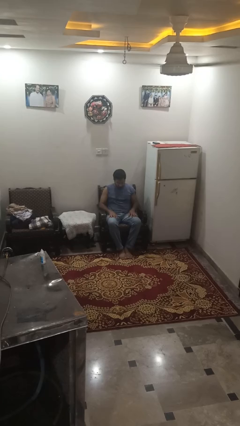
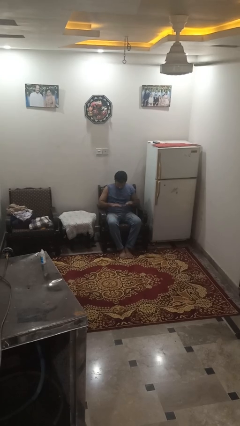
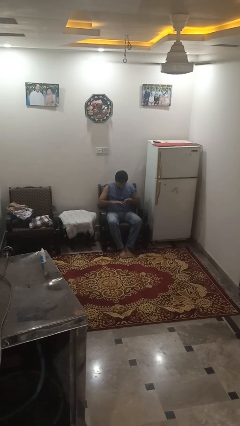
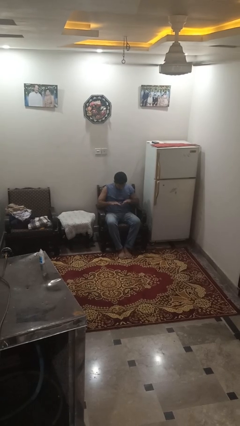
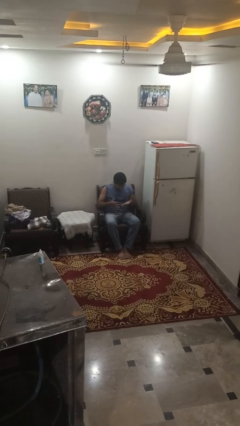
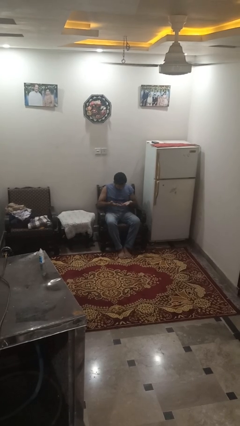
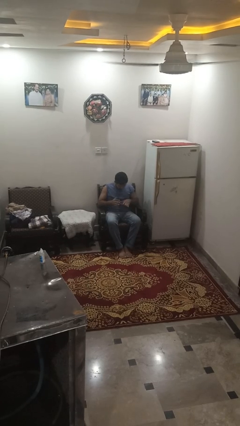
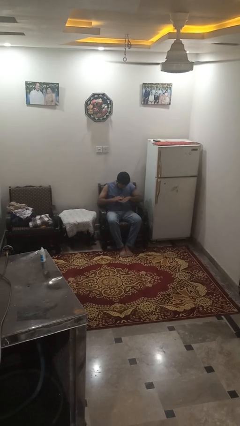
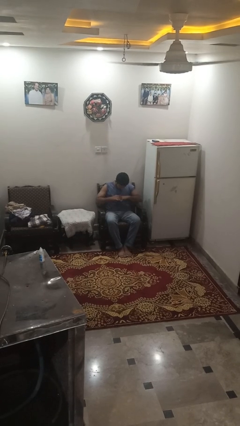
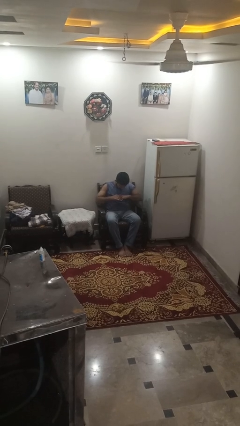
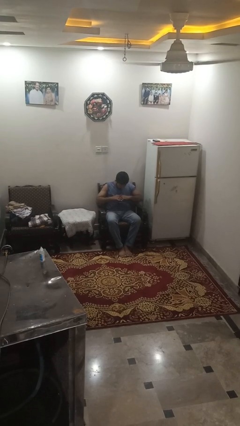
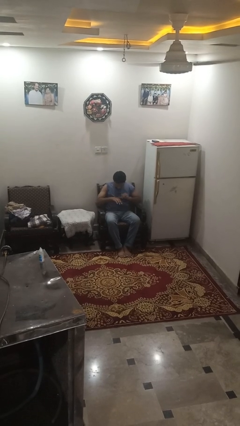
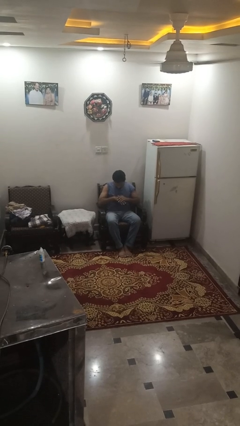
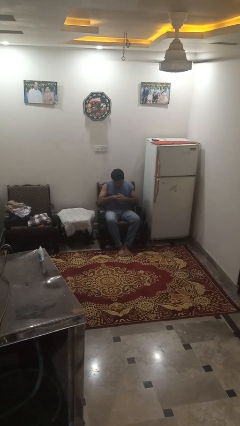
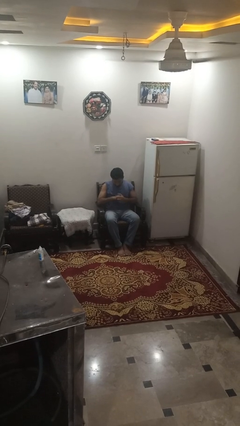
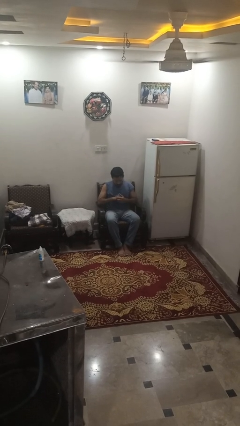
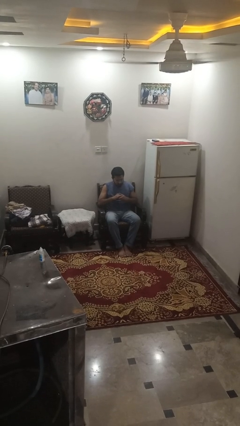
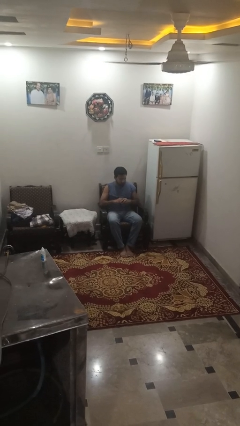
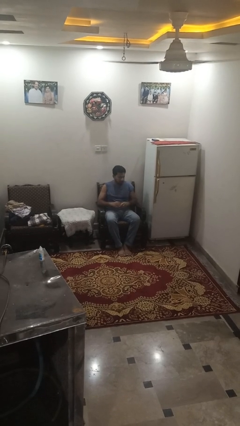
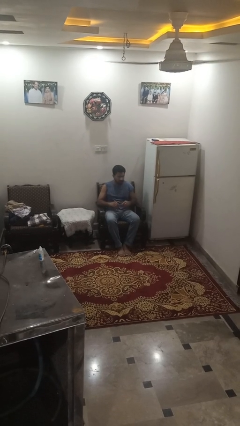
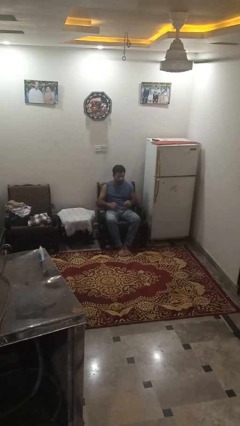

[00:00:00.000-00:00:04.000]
person looks at hands in lap

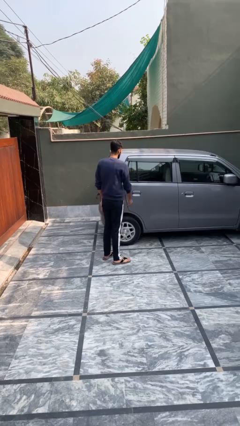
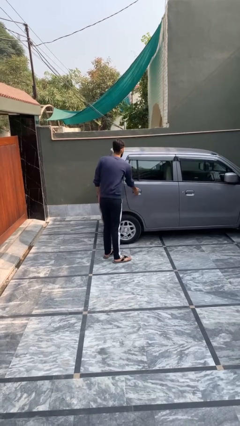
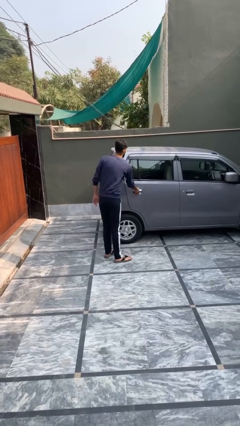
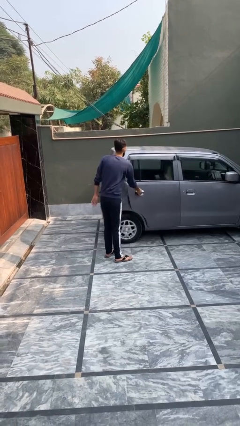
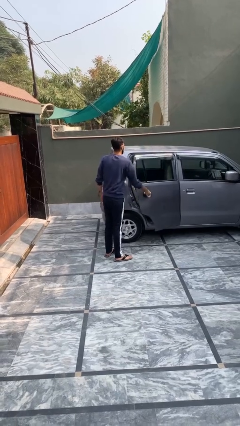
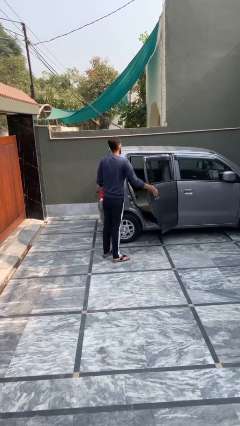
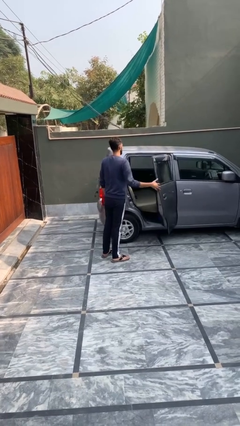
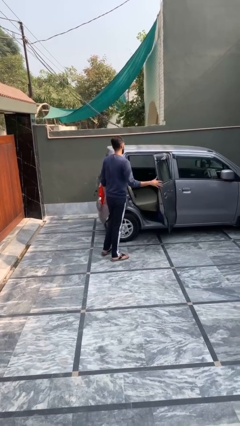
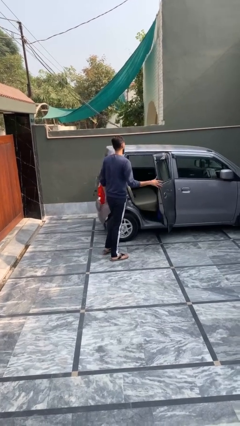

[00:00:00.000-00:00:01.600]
person opens car door

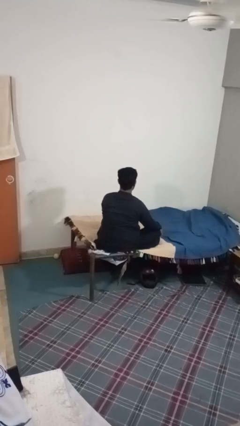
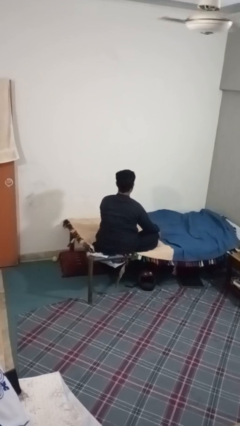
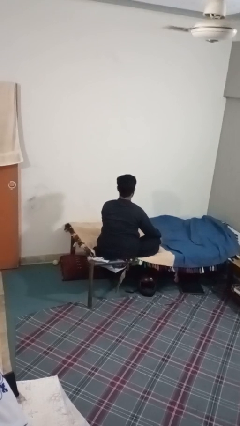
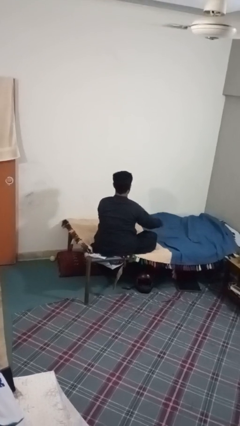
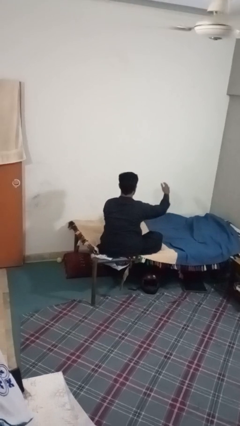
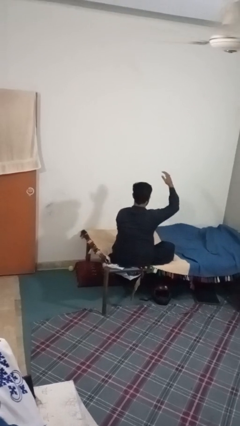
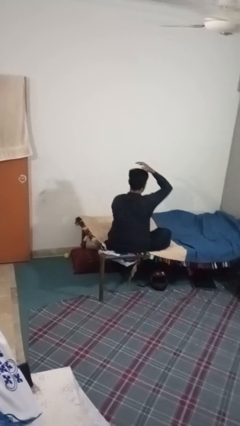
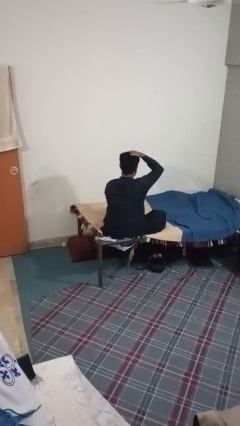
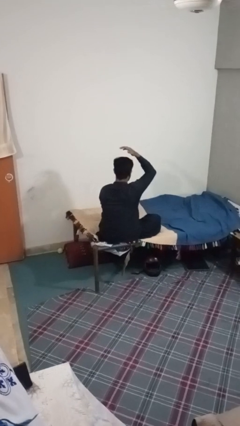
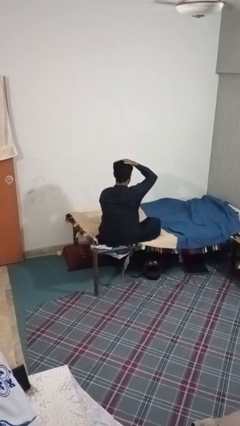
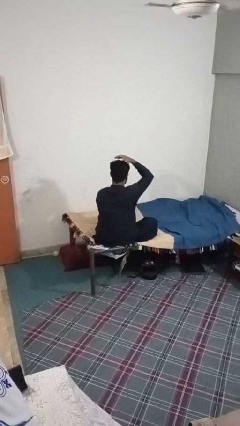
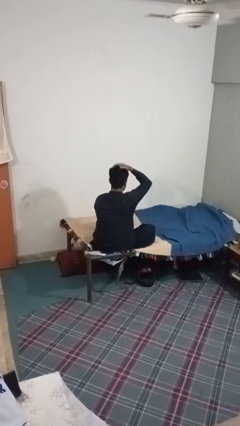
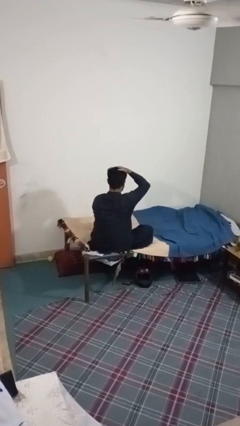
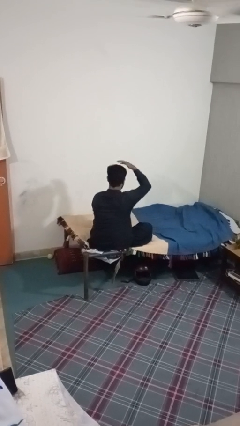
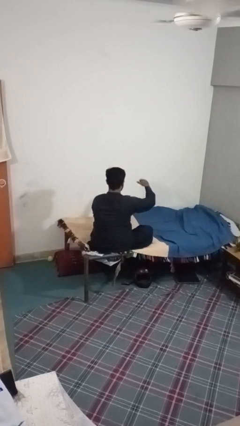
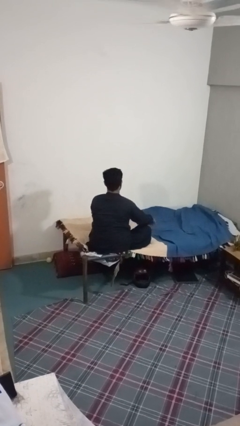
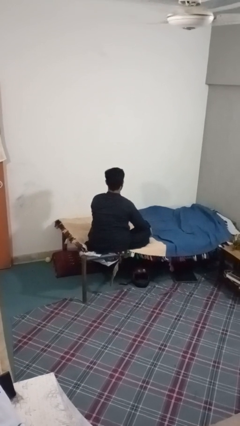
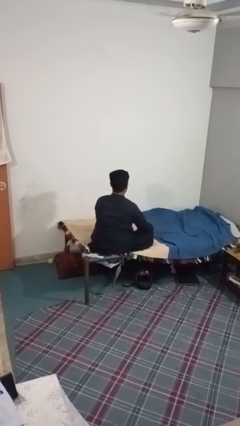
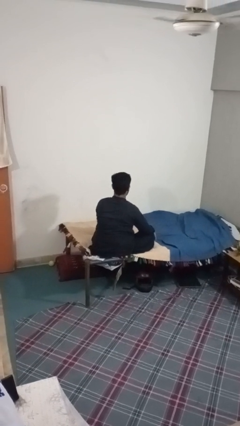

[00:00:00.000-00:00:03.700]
person pats head

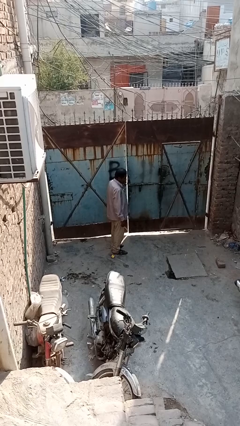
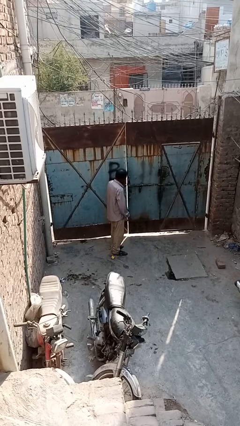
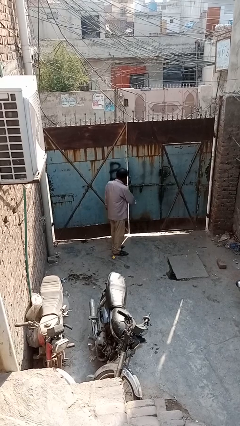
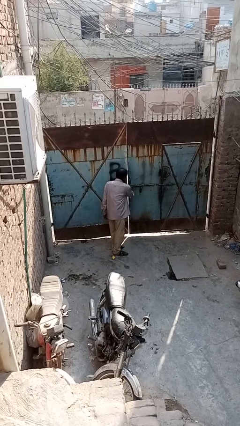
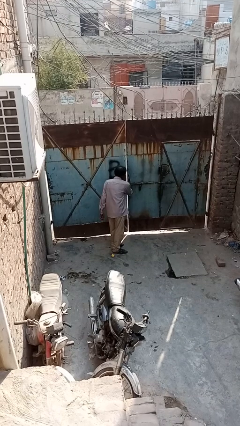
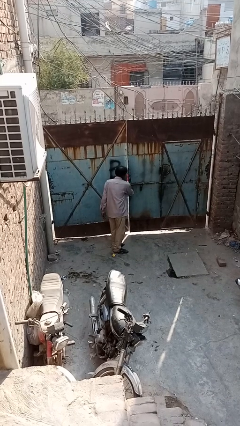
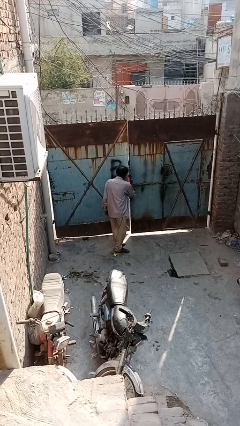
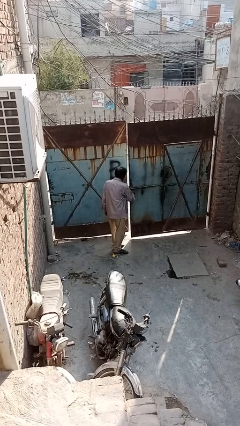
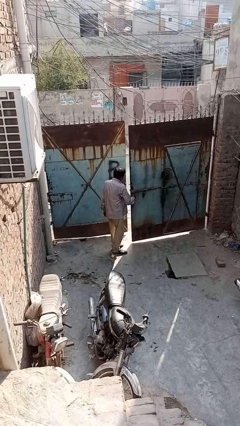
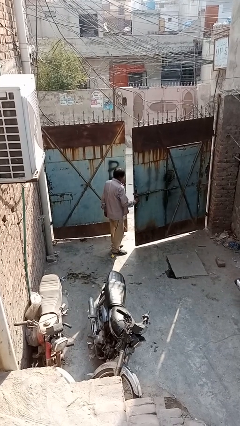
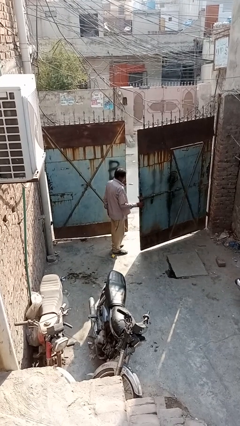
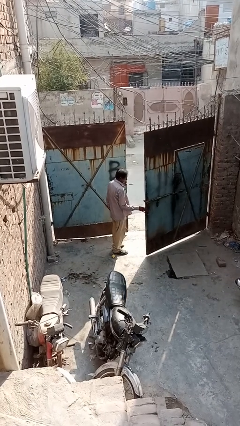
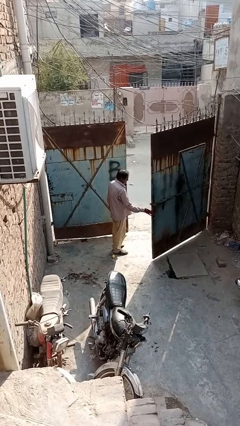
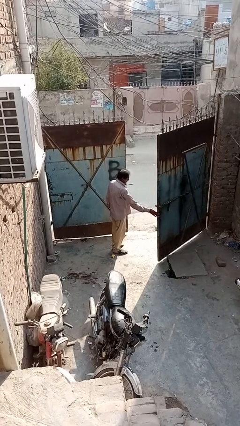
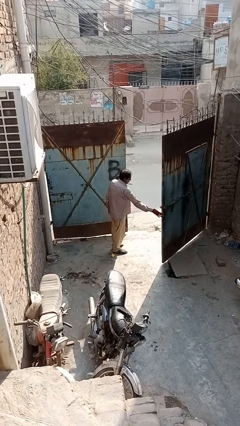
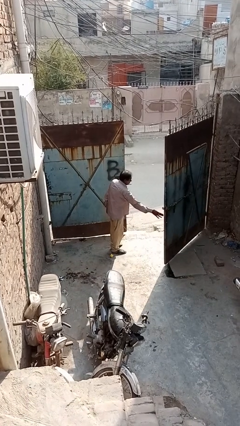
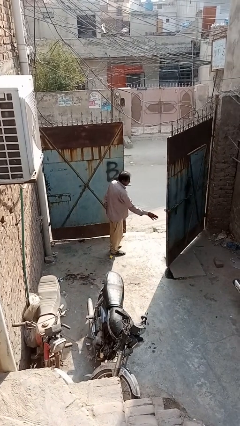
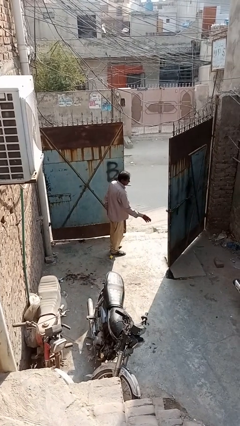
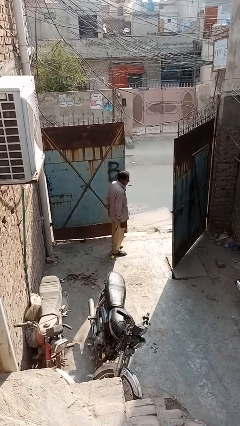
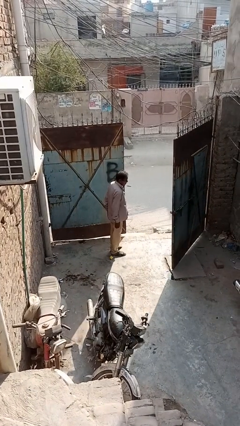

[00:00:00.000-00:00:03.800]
person opens gate

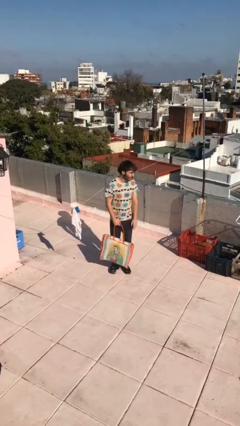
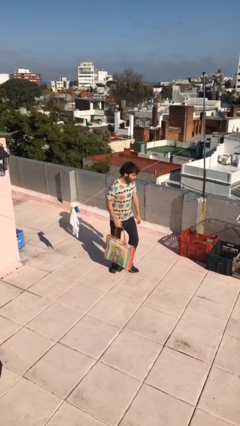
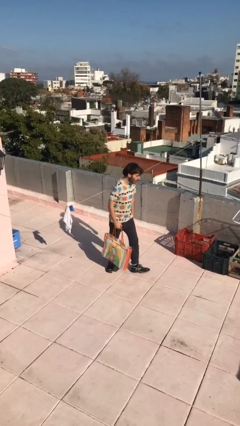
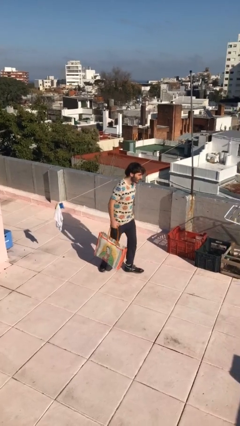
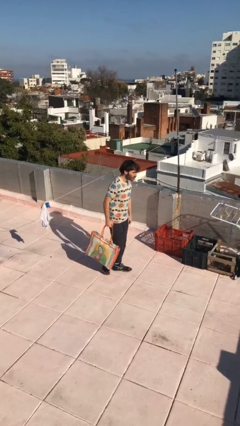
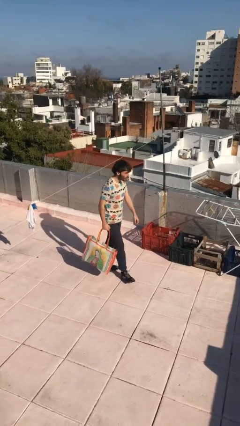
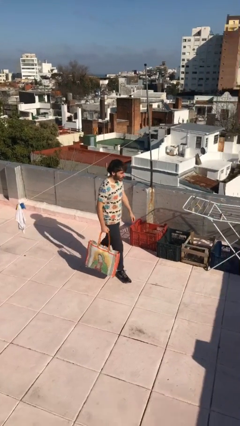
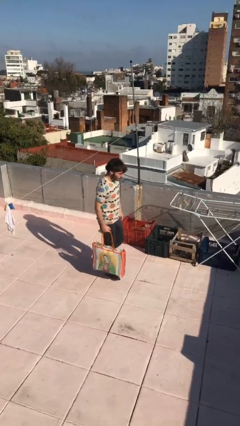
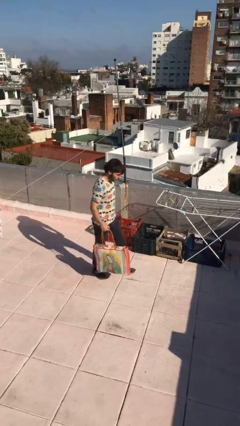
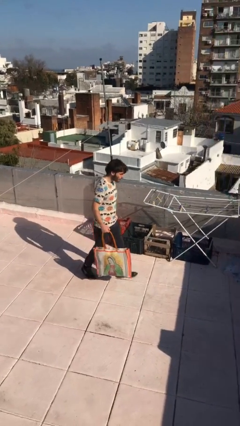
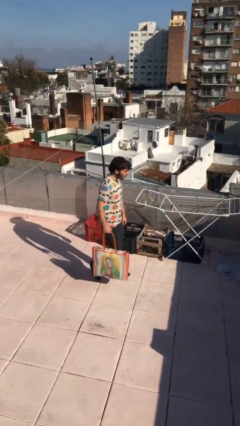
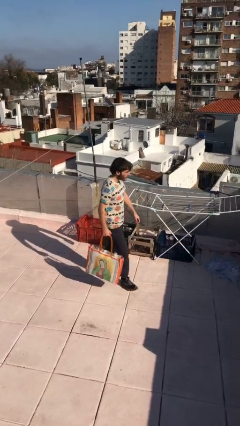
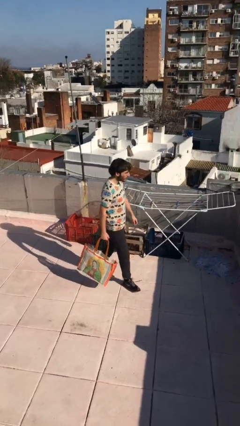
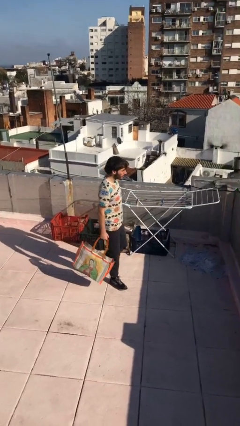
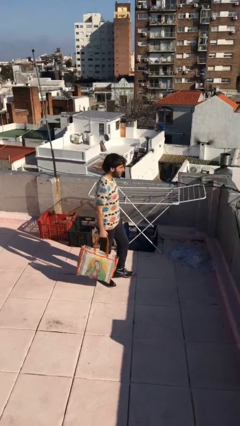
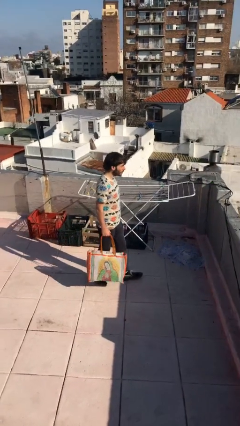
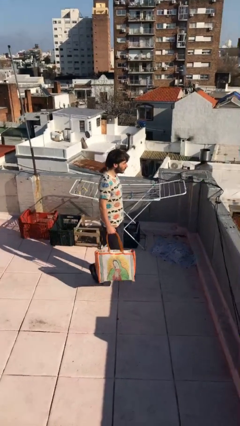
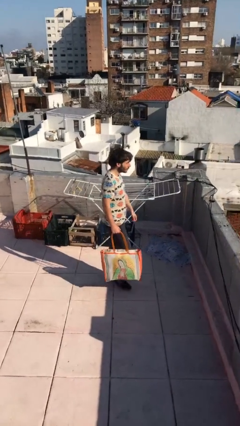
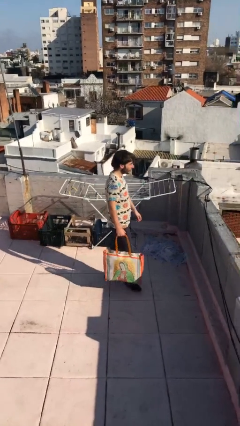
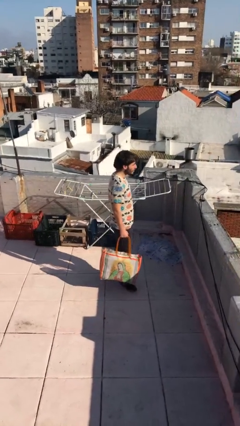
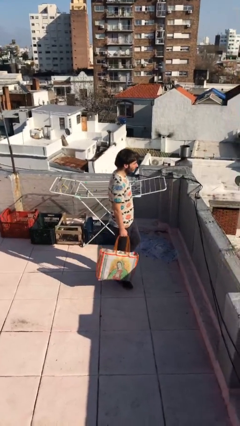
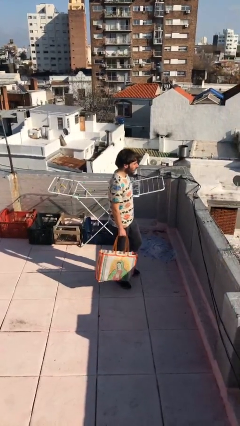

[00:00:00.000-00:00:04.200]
person carries groceries

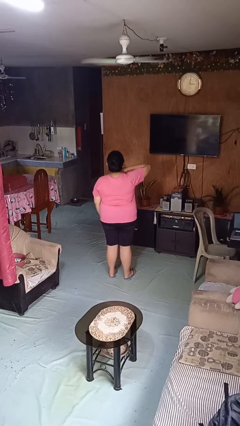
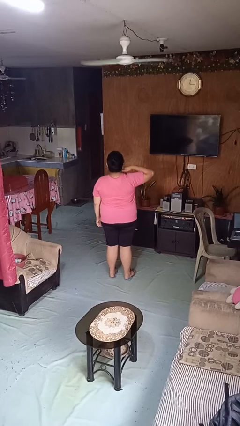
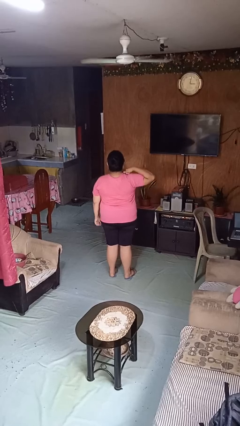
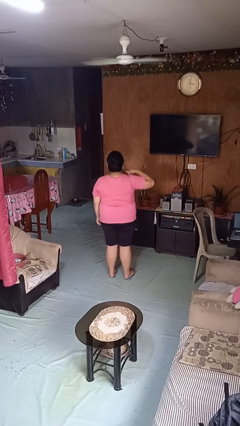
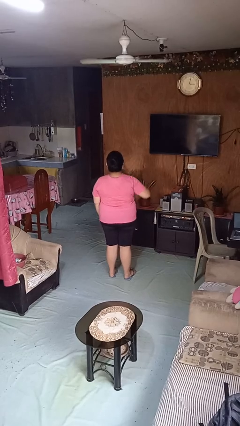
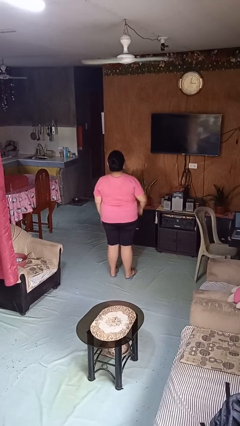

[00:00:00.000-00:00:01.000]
person gestures cut
